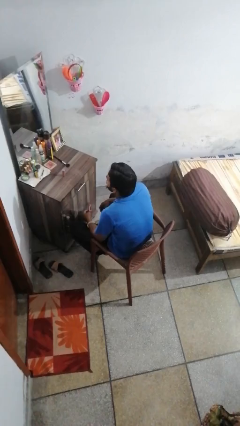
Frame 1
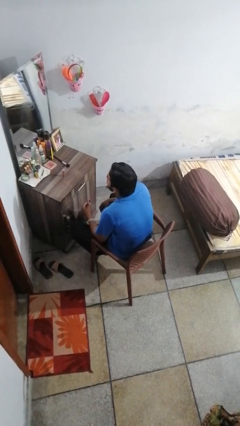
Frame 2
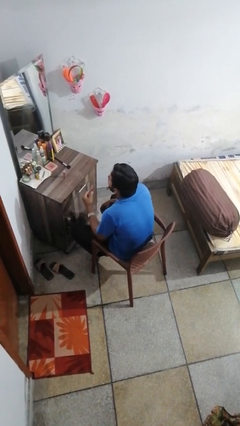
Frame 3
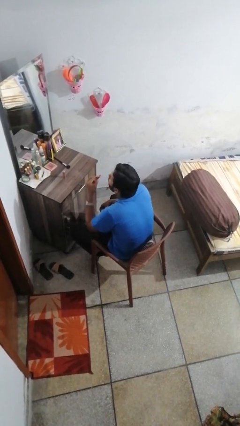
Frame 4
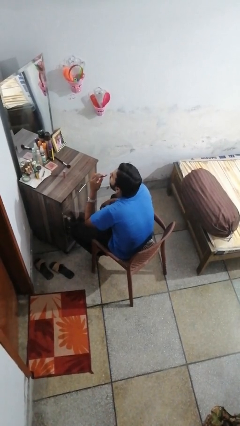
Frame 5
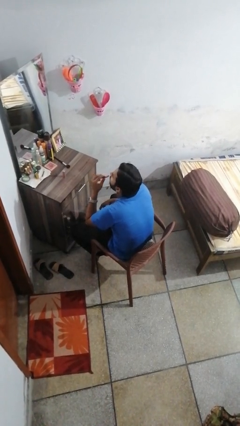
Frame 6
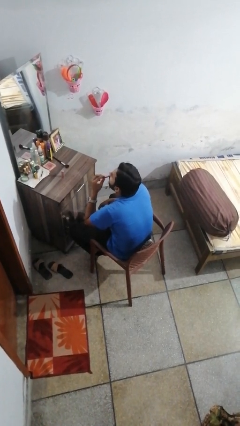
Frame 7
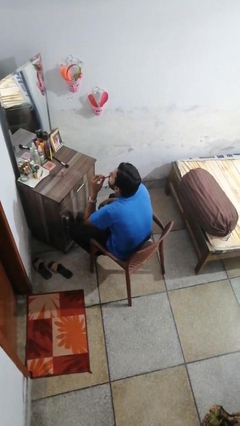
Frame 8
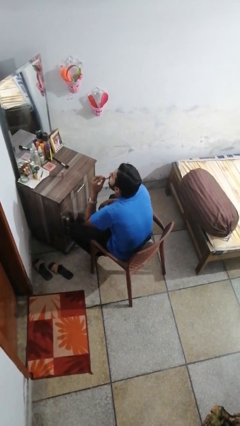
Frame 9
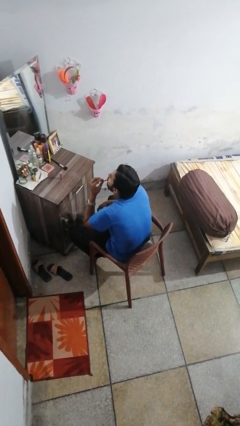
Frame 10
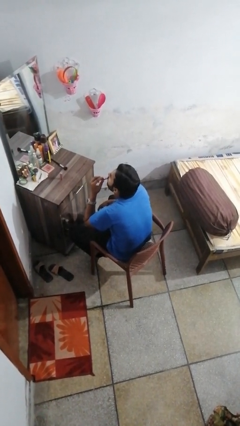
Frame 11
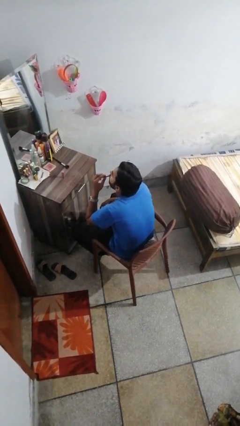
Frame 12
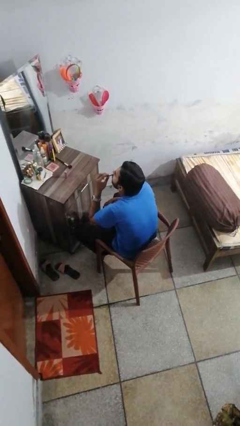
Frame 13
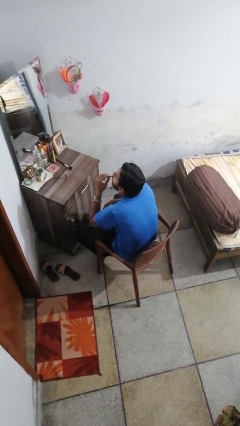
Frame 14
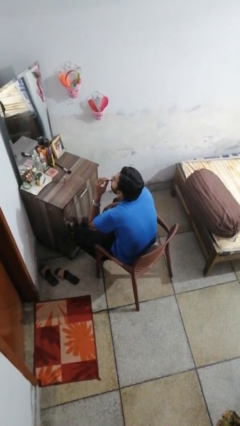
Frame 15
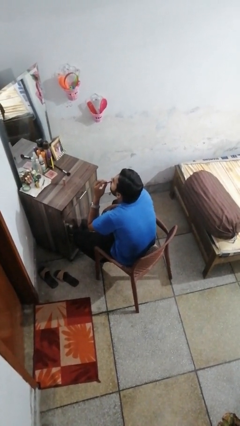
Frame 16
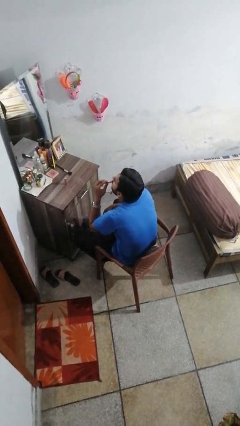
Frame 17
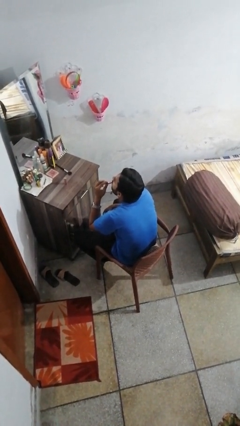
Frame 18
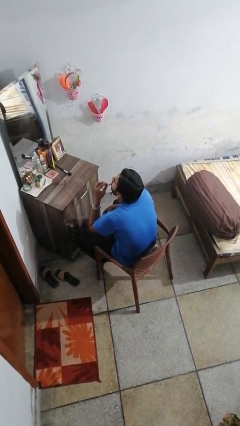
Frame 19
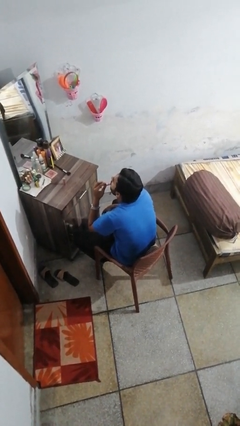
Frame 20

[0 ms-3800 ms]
person applies lip makeup

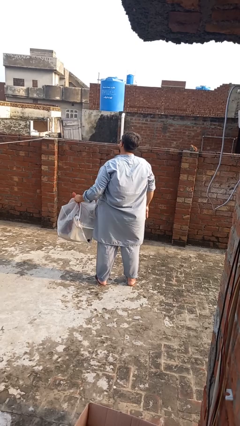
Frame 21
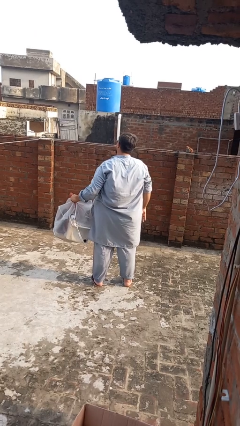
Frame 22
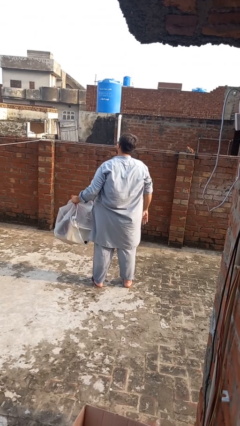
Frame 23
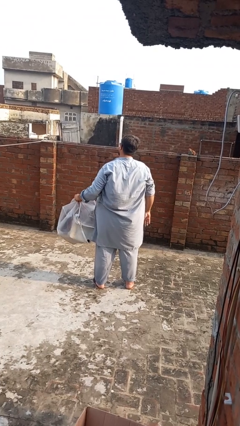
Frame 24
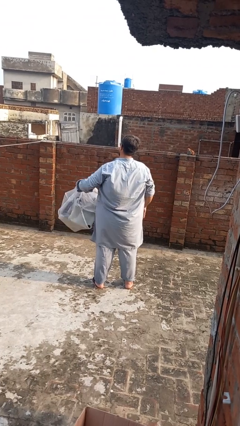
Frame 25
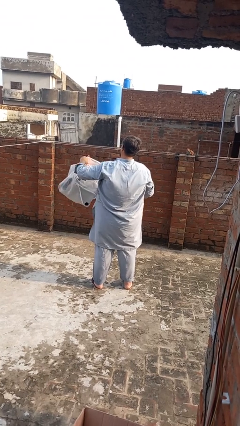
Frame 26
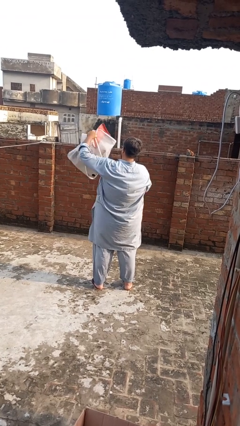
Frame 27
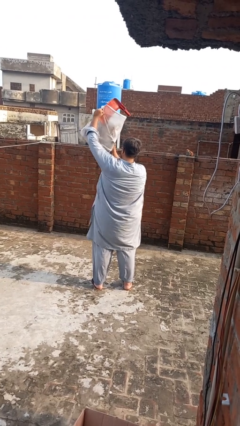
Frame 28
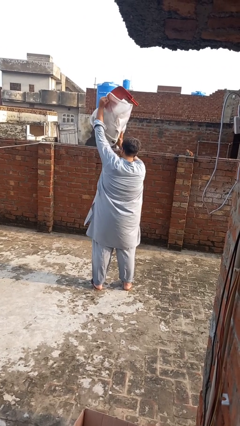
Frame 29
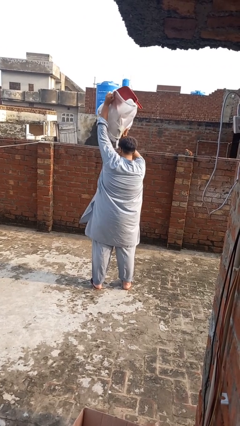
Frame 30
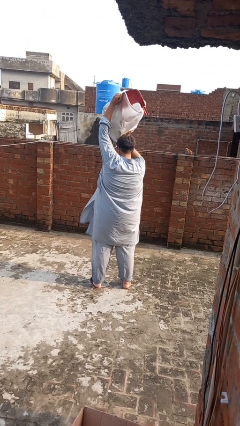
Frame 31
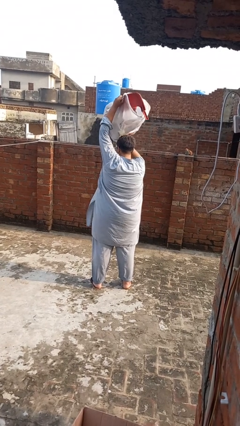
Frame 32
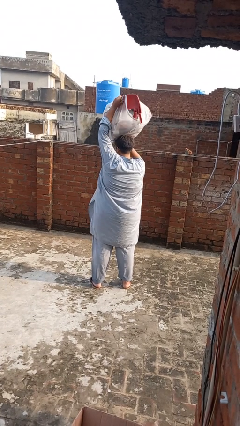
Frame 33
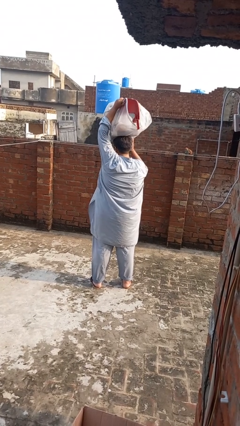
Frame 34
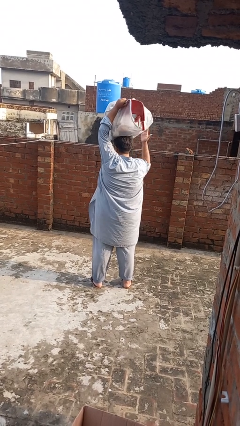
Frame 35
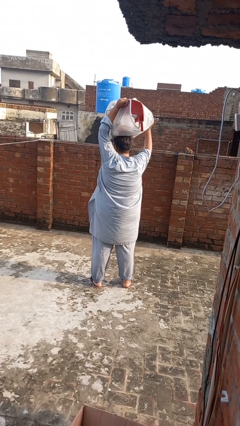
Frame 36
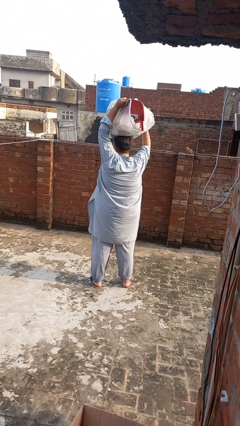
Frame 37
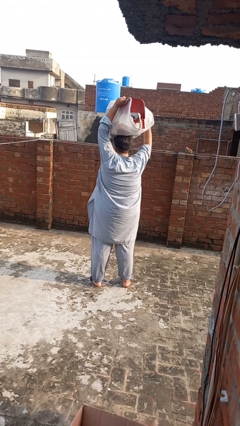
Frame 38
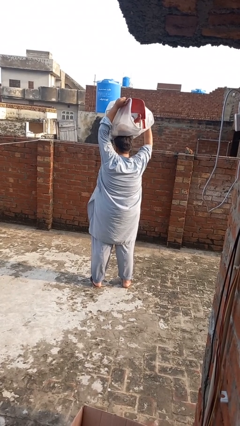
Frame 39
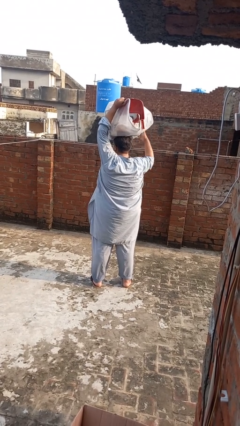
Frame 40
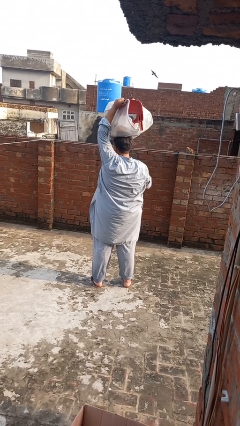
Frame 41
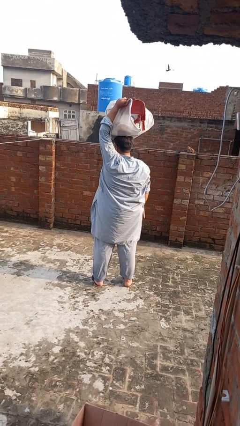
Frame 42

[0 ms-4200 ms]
person holds object above head

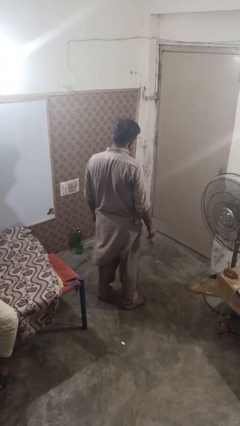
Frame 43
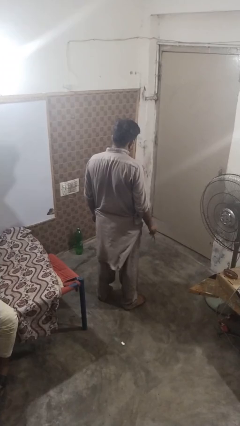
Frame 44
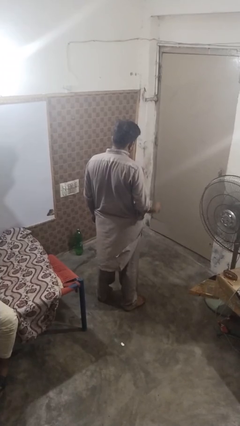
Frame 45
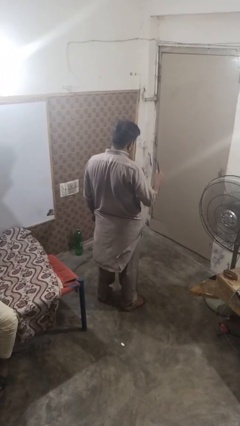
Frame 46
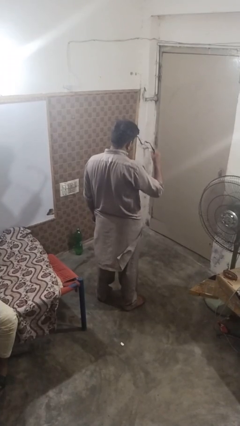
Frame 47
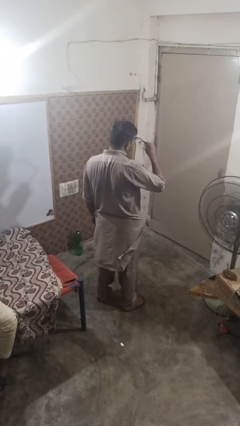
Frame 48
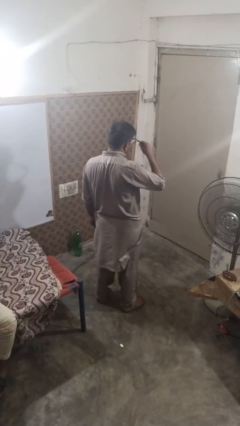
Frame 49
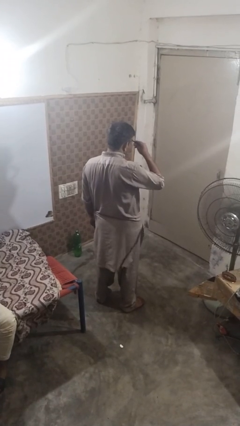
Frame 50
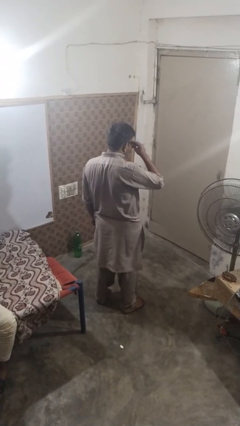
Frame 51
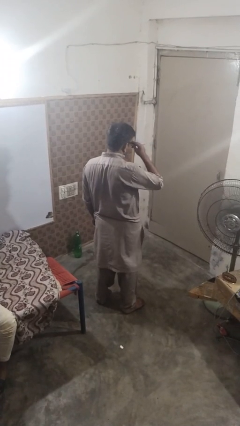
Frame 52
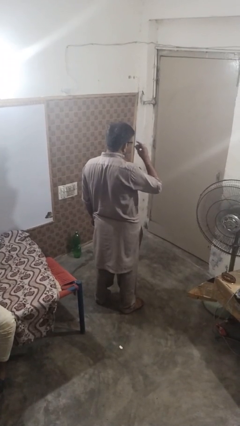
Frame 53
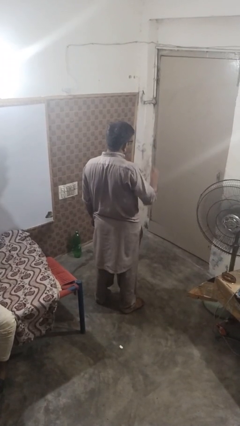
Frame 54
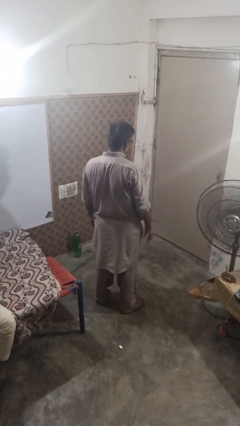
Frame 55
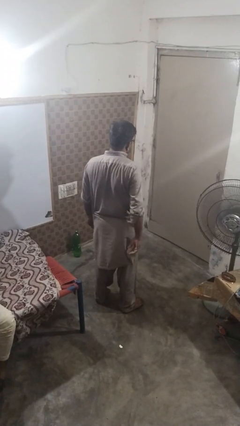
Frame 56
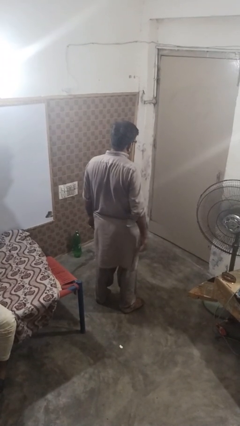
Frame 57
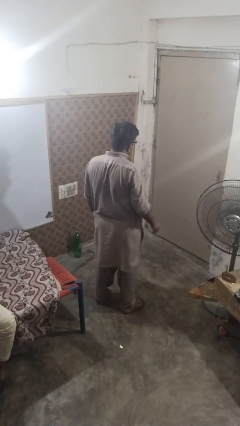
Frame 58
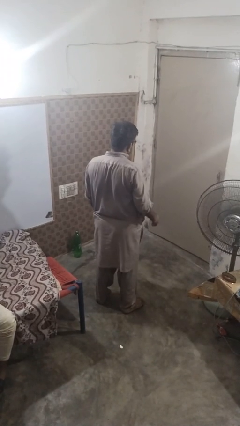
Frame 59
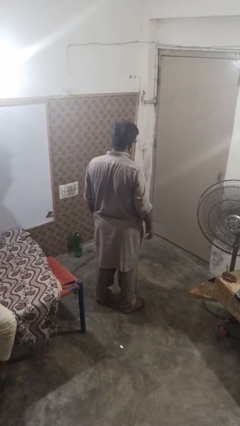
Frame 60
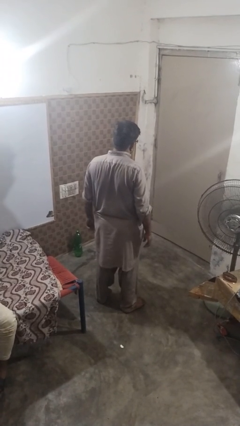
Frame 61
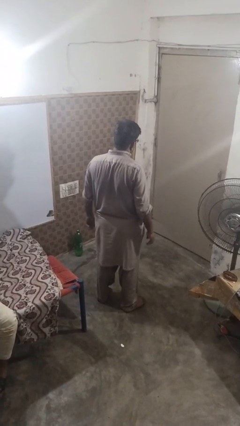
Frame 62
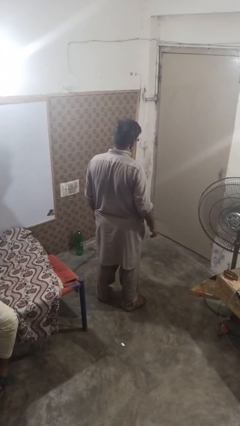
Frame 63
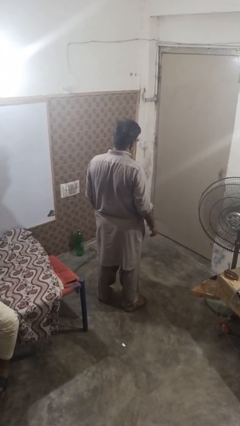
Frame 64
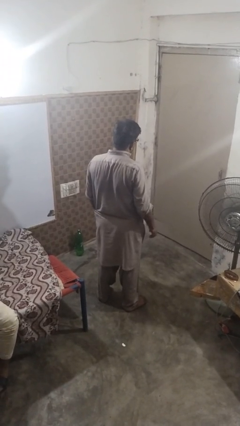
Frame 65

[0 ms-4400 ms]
person puts on glasses

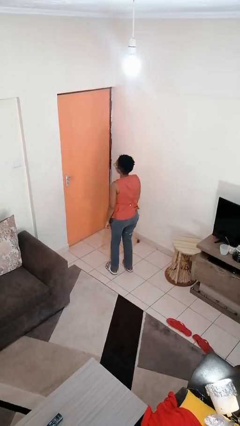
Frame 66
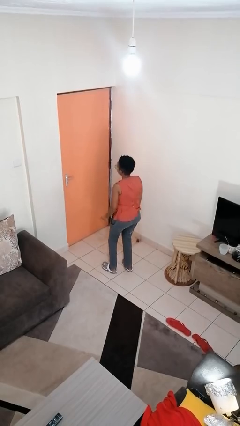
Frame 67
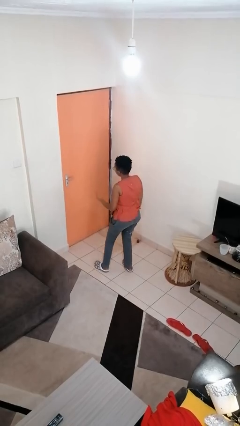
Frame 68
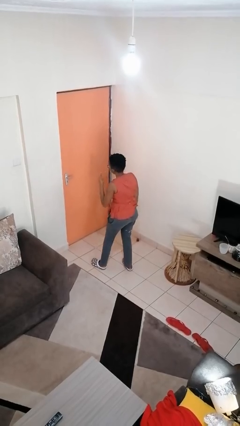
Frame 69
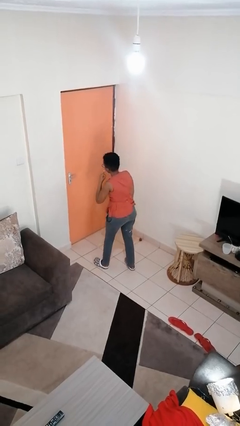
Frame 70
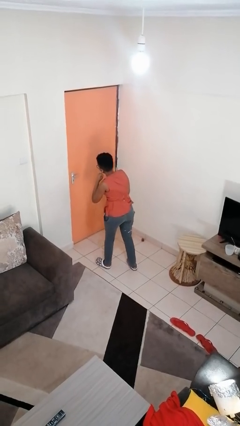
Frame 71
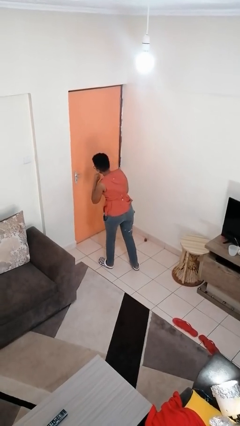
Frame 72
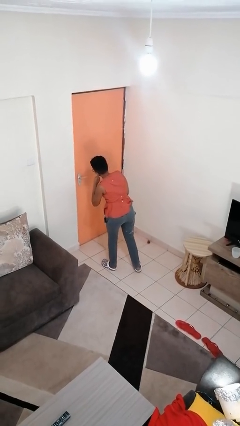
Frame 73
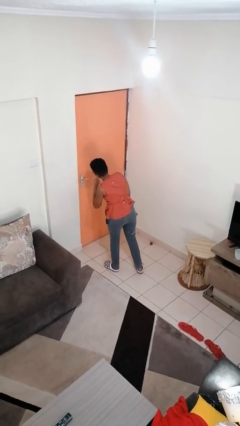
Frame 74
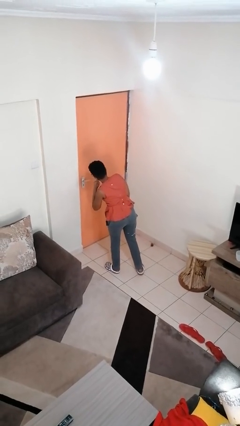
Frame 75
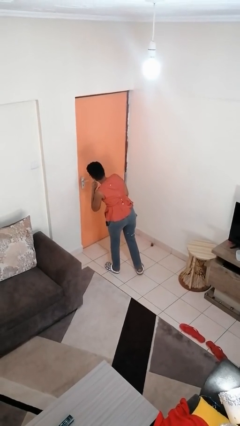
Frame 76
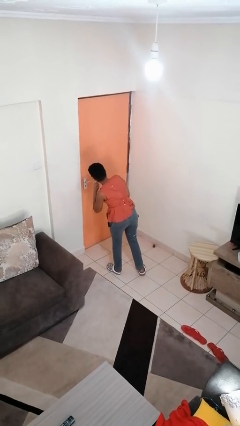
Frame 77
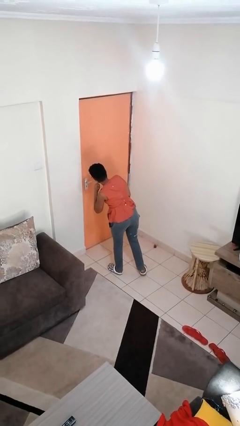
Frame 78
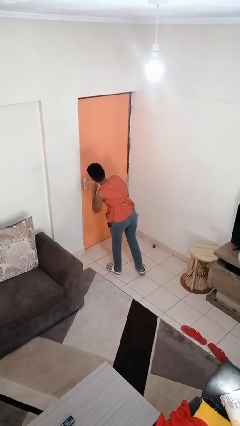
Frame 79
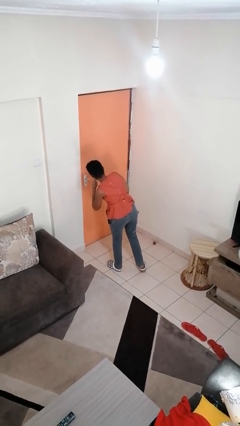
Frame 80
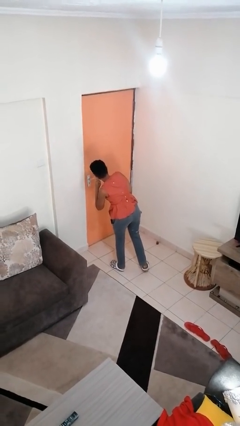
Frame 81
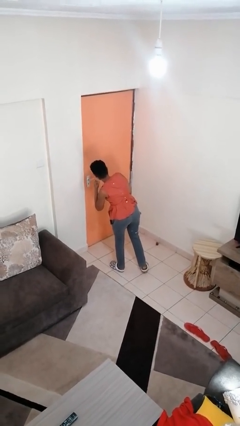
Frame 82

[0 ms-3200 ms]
person gestures listen closely

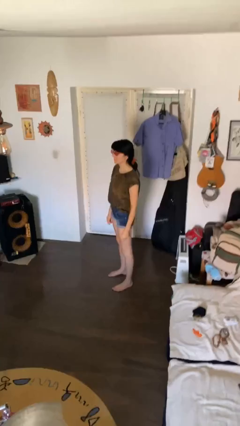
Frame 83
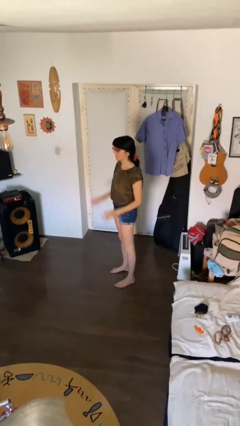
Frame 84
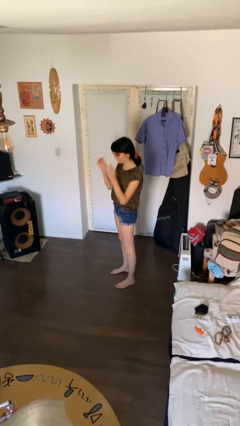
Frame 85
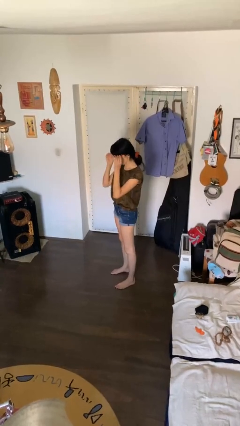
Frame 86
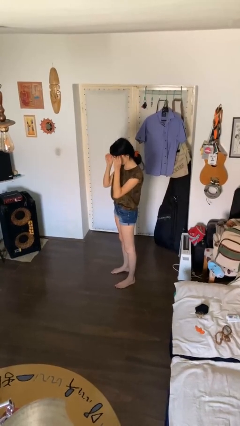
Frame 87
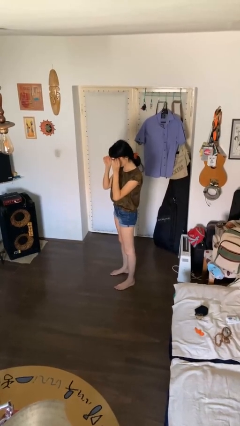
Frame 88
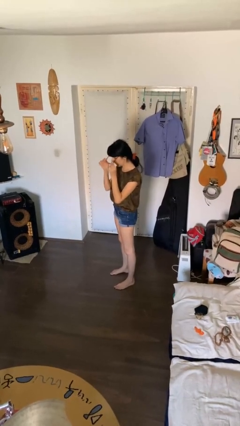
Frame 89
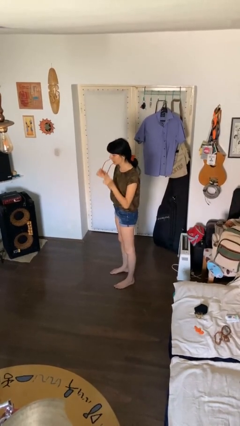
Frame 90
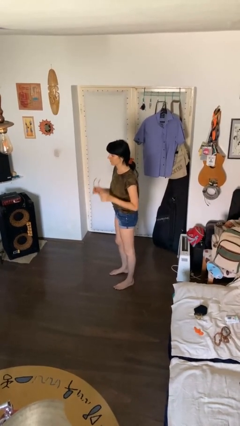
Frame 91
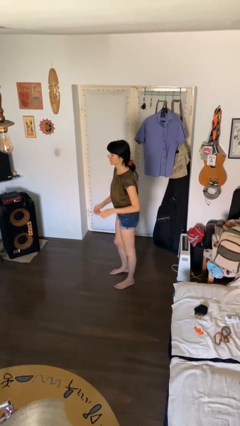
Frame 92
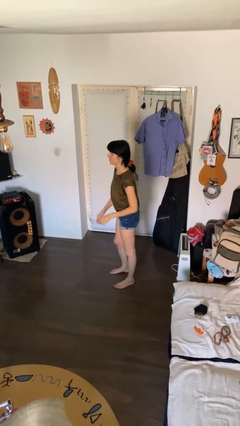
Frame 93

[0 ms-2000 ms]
person takes off sunglasses
